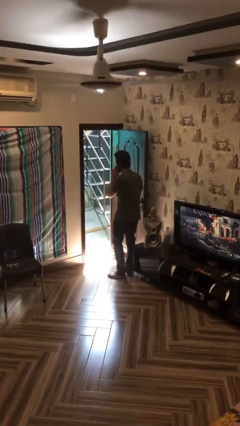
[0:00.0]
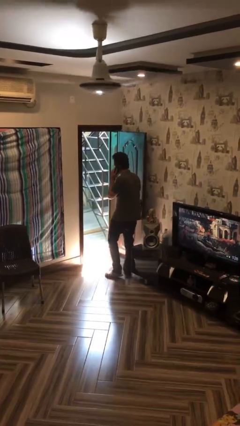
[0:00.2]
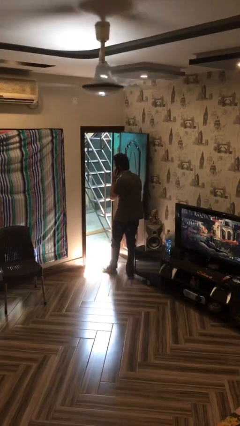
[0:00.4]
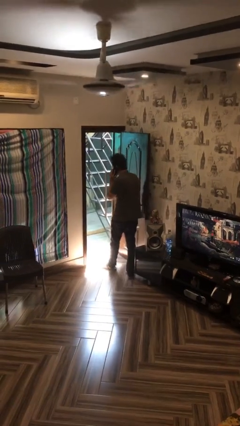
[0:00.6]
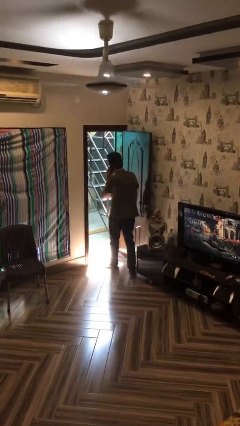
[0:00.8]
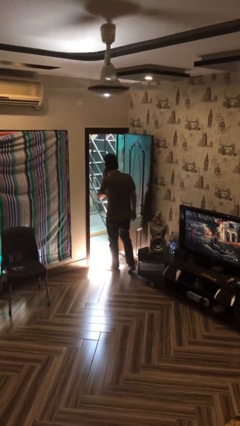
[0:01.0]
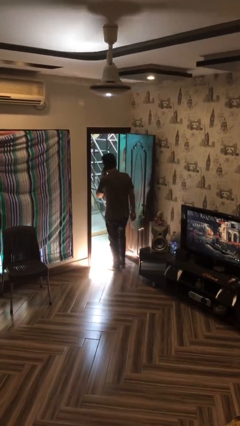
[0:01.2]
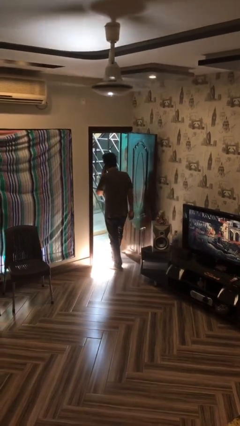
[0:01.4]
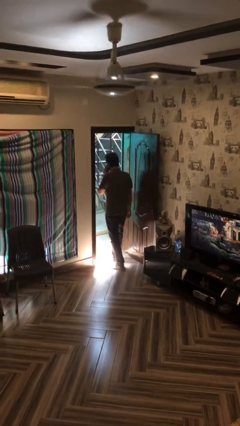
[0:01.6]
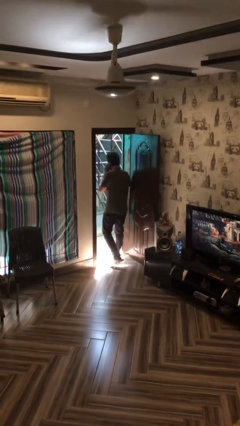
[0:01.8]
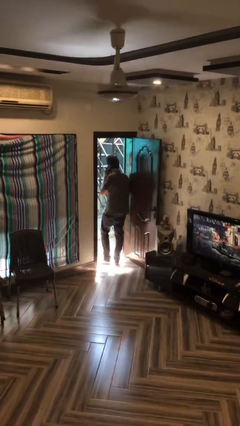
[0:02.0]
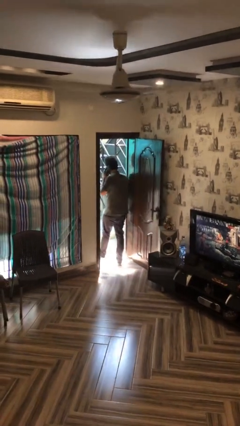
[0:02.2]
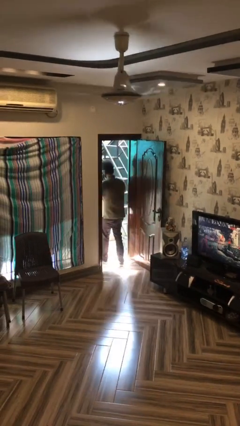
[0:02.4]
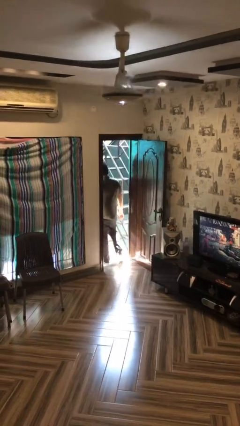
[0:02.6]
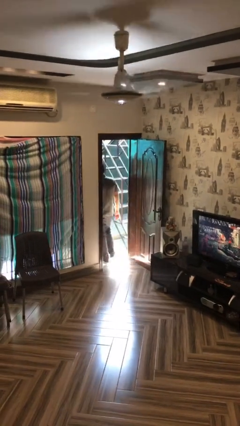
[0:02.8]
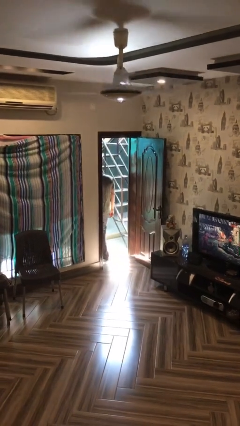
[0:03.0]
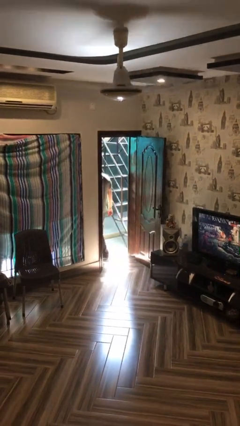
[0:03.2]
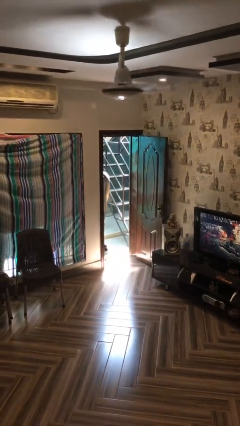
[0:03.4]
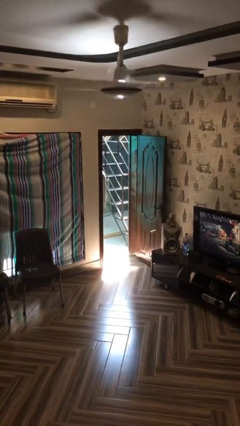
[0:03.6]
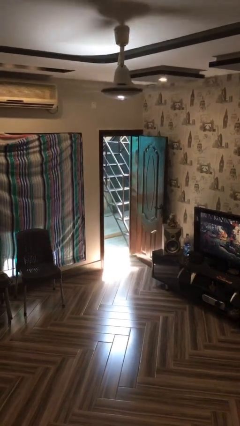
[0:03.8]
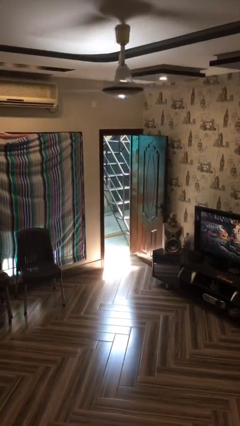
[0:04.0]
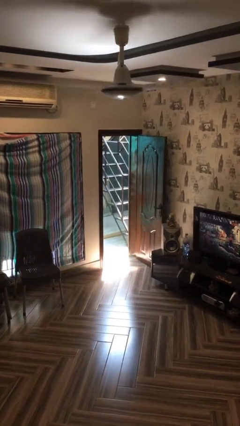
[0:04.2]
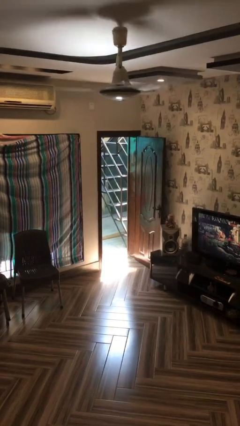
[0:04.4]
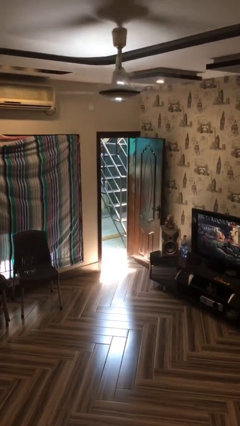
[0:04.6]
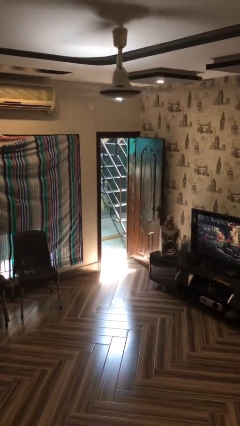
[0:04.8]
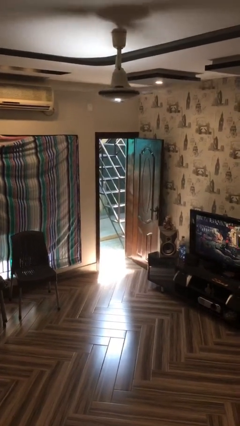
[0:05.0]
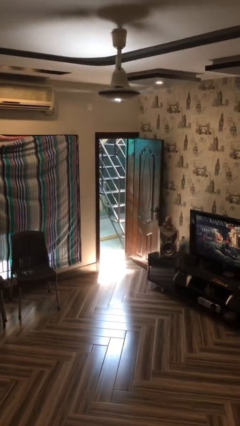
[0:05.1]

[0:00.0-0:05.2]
person exits scene through structure

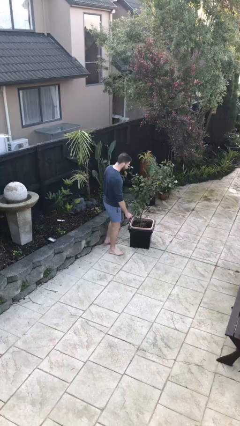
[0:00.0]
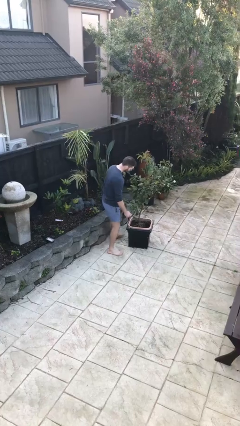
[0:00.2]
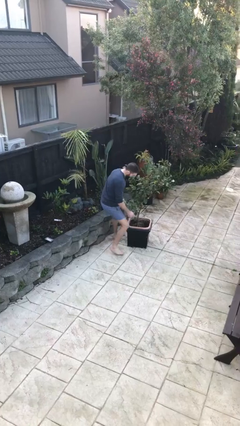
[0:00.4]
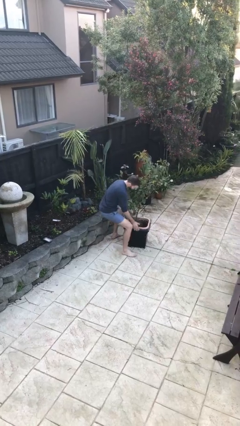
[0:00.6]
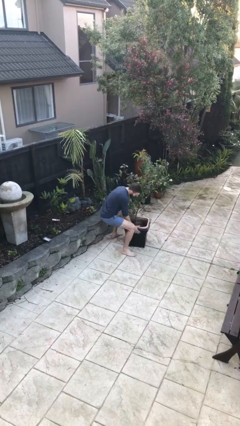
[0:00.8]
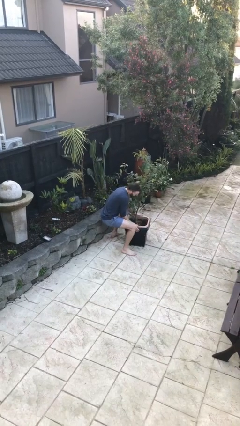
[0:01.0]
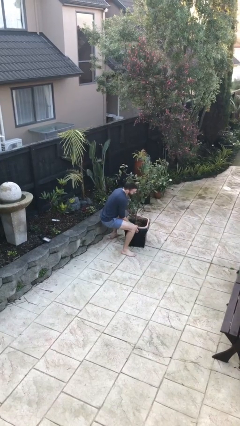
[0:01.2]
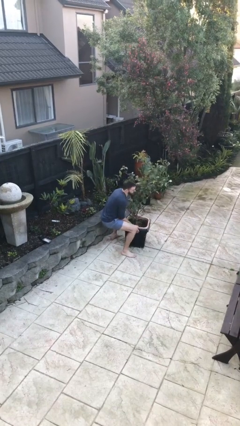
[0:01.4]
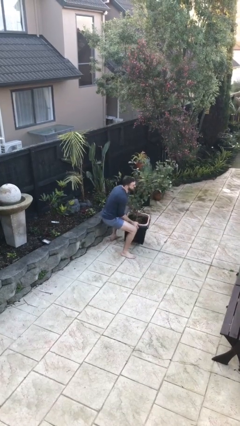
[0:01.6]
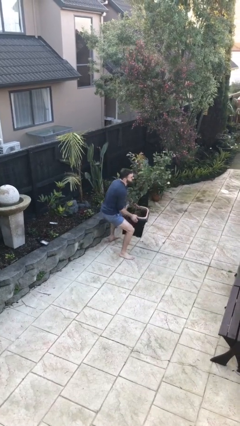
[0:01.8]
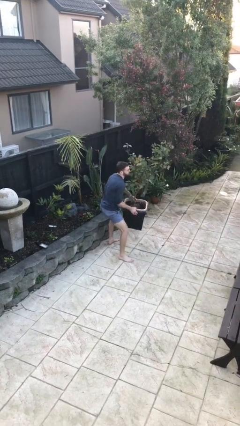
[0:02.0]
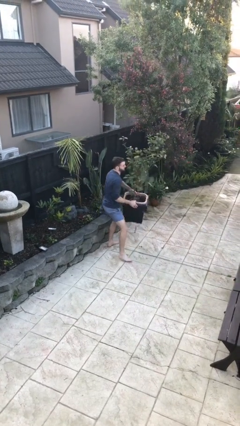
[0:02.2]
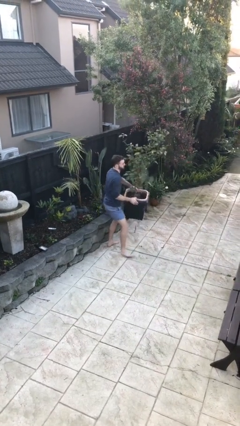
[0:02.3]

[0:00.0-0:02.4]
person picks up object from floor

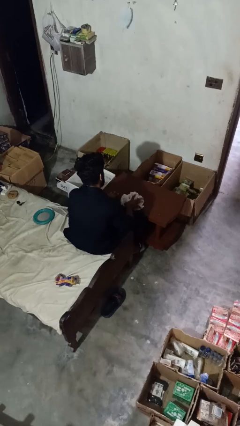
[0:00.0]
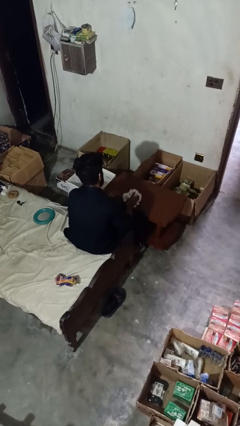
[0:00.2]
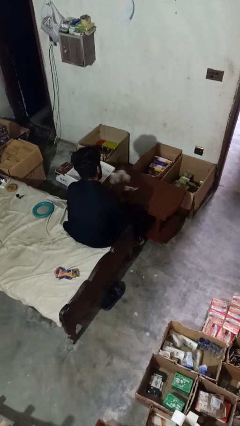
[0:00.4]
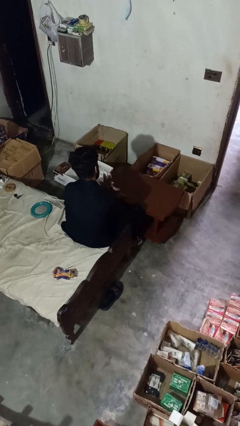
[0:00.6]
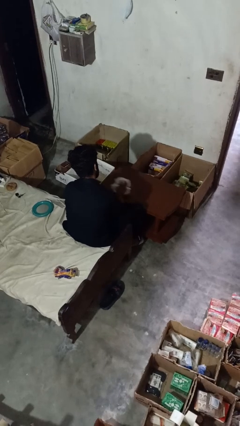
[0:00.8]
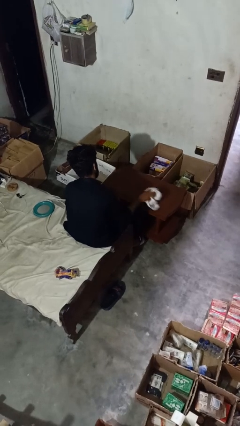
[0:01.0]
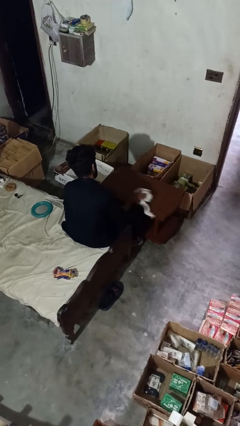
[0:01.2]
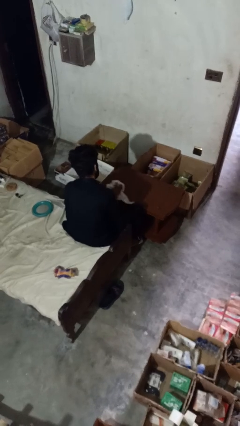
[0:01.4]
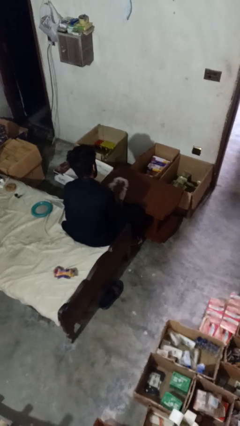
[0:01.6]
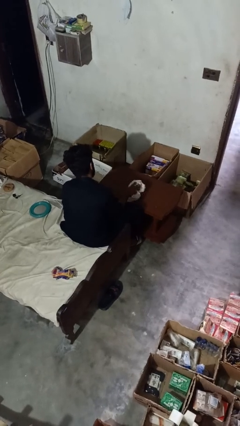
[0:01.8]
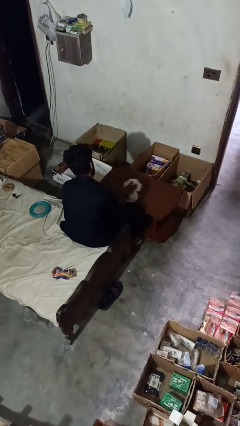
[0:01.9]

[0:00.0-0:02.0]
person cleans table with rag

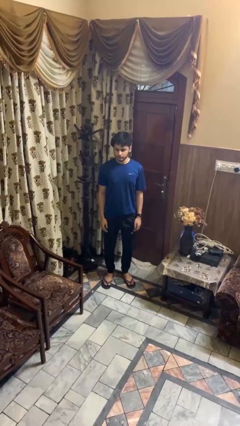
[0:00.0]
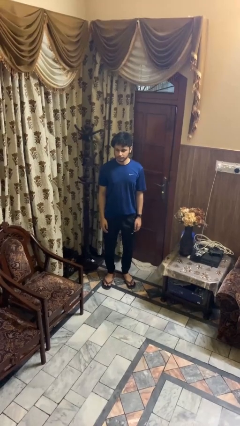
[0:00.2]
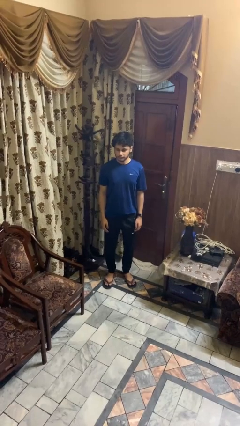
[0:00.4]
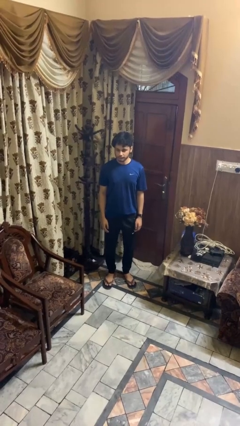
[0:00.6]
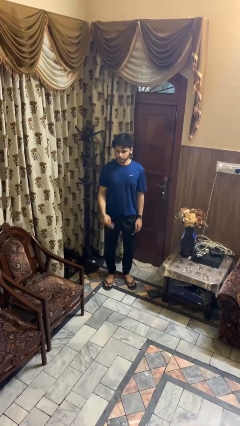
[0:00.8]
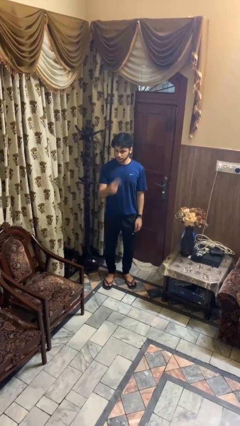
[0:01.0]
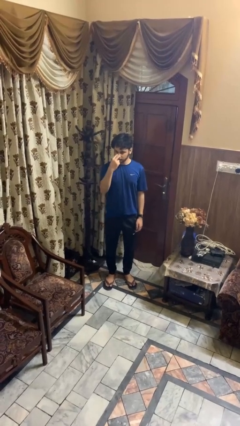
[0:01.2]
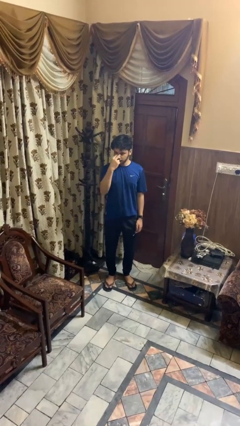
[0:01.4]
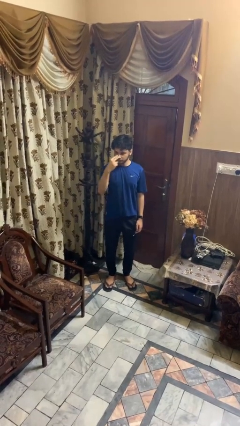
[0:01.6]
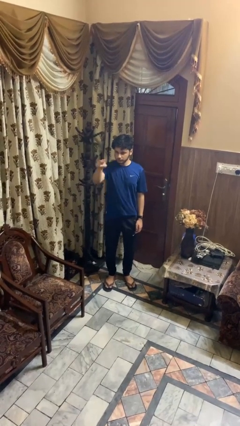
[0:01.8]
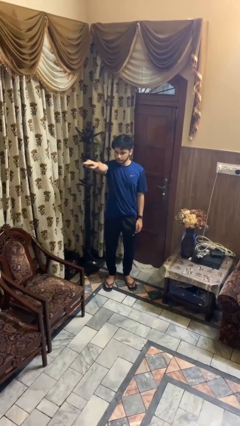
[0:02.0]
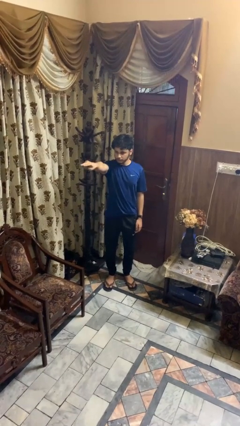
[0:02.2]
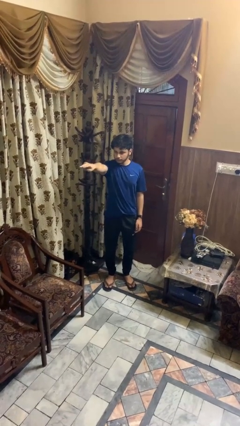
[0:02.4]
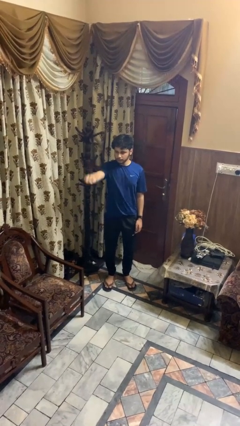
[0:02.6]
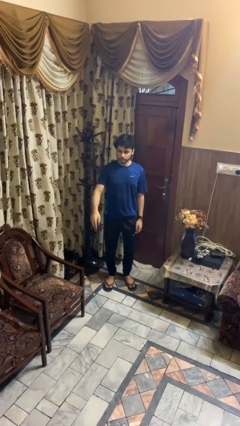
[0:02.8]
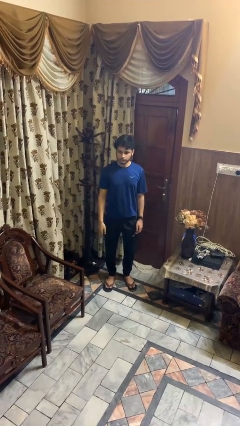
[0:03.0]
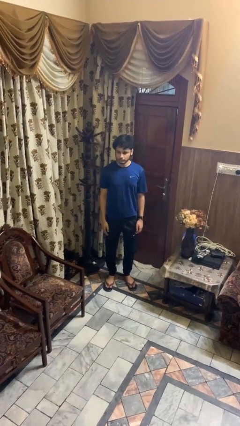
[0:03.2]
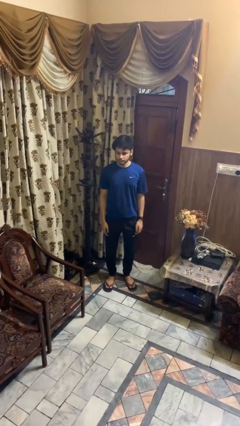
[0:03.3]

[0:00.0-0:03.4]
person gestures watch closely

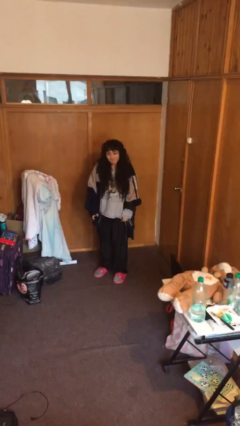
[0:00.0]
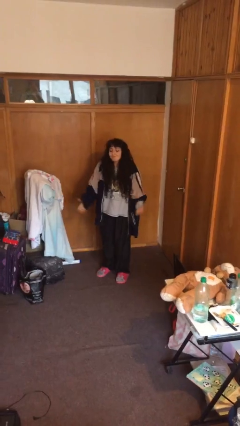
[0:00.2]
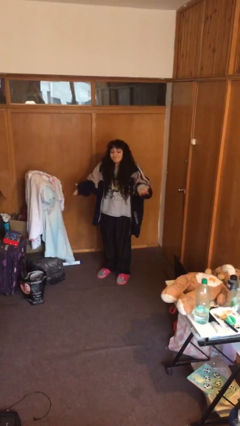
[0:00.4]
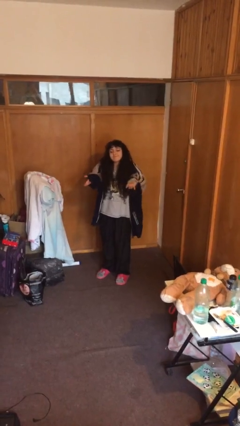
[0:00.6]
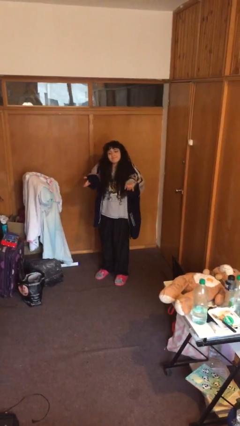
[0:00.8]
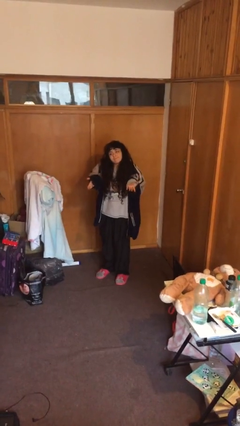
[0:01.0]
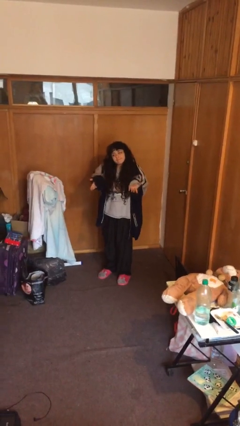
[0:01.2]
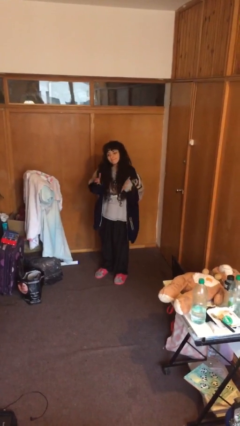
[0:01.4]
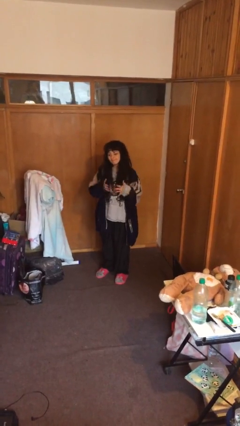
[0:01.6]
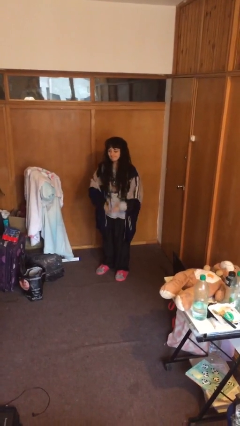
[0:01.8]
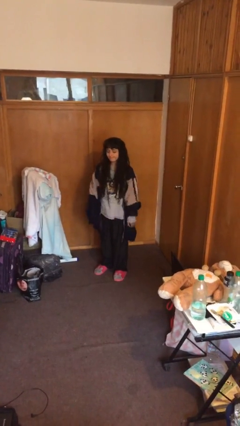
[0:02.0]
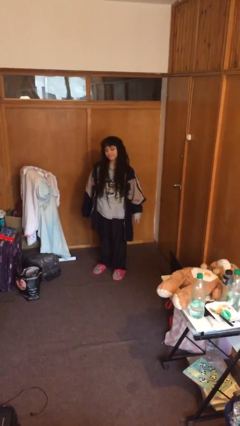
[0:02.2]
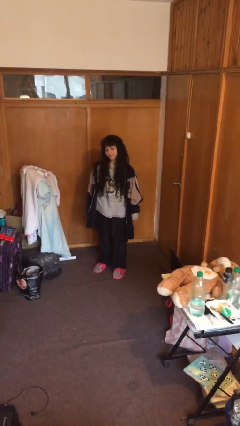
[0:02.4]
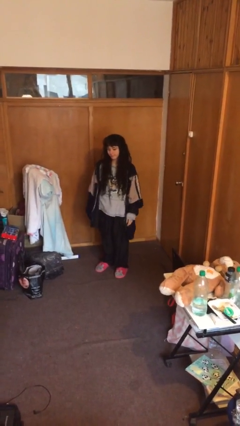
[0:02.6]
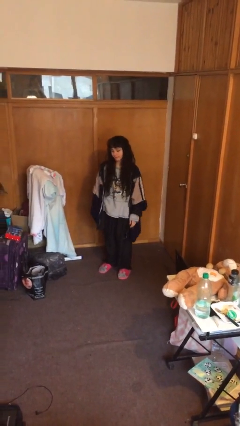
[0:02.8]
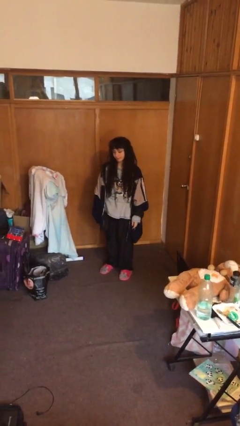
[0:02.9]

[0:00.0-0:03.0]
person shrugs

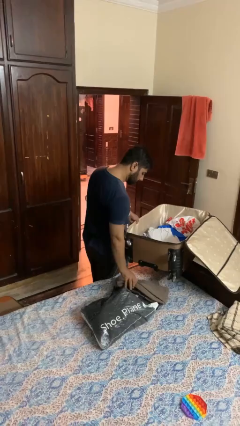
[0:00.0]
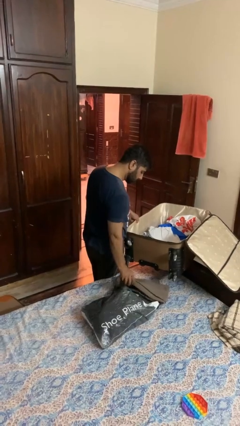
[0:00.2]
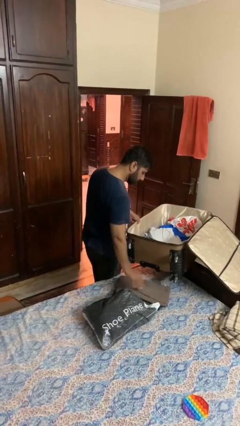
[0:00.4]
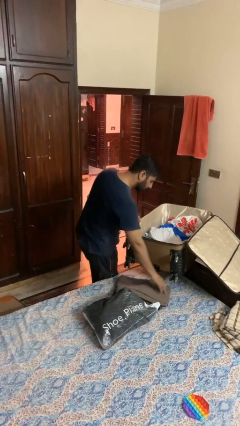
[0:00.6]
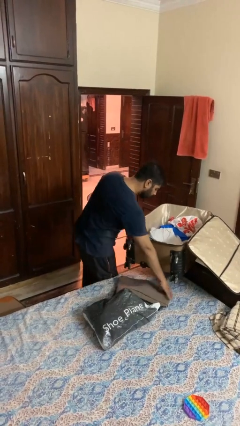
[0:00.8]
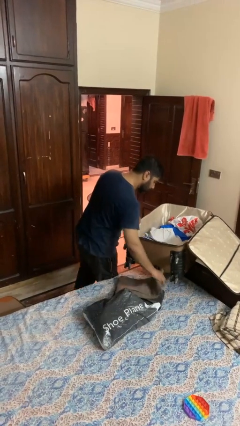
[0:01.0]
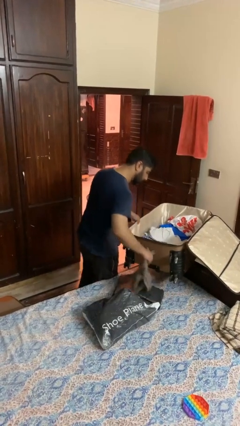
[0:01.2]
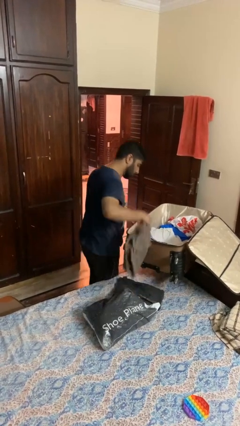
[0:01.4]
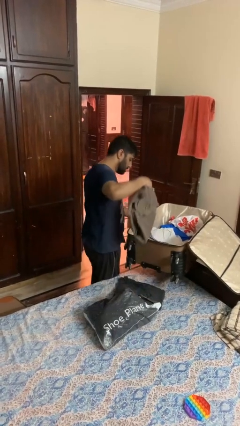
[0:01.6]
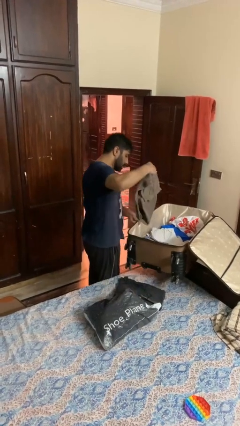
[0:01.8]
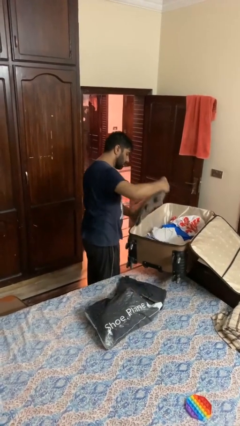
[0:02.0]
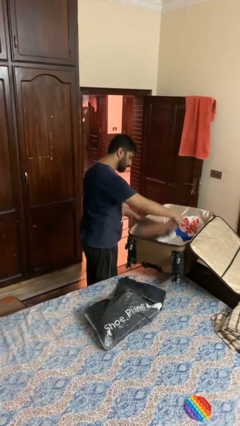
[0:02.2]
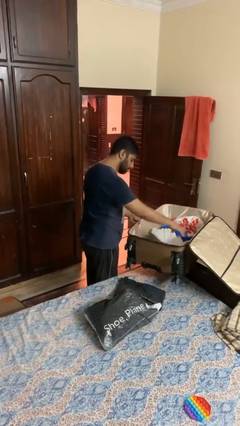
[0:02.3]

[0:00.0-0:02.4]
person loads clothes into suitcase
